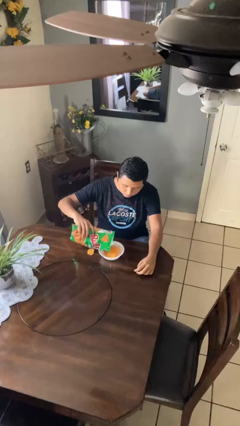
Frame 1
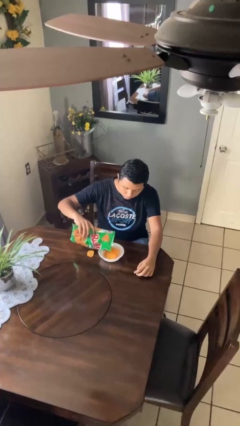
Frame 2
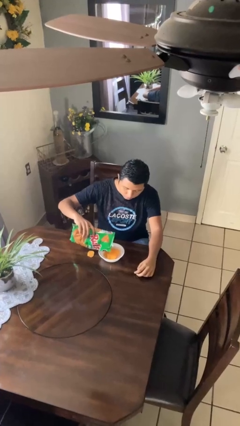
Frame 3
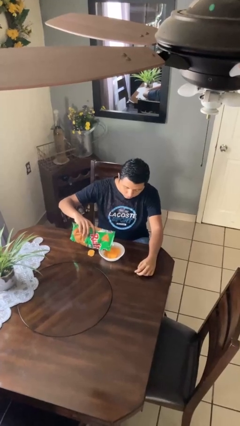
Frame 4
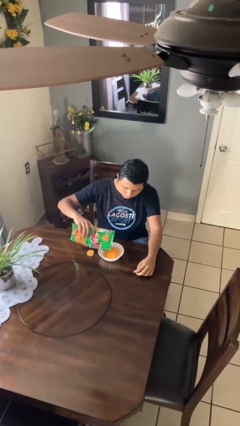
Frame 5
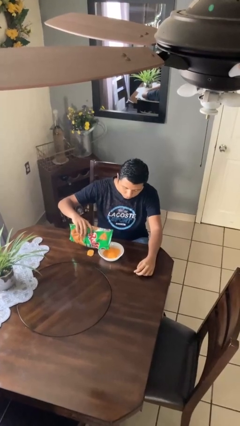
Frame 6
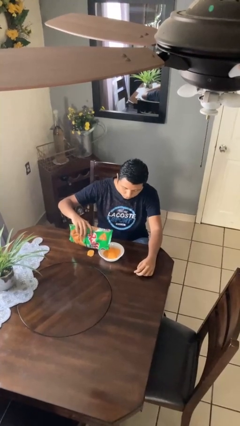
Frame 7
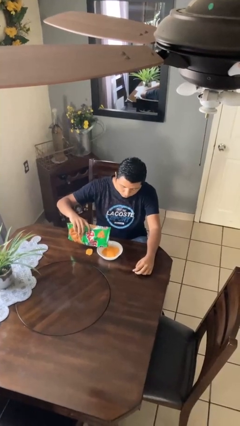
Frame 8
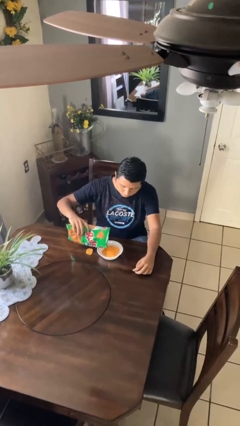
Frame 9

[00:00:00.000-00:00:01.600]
person pours into bowl

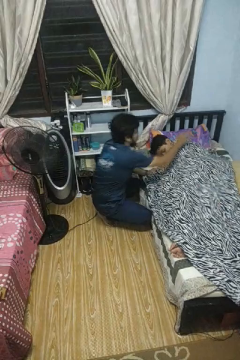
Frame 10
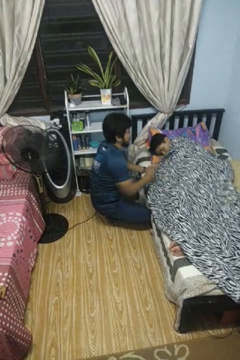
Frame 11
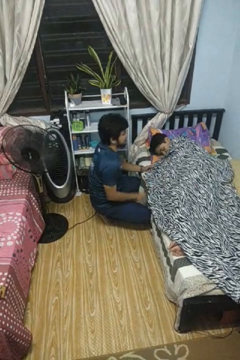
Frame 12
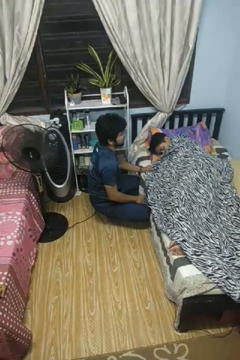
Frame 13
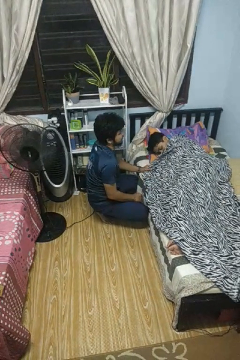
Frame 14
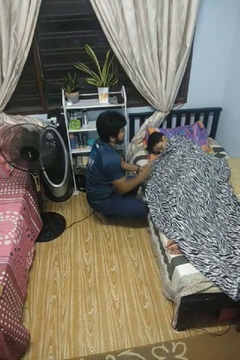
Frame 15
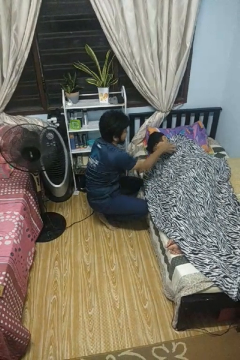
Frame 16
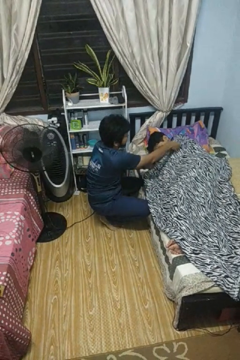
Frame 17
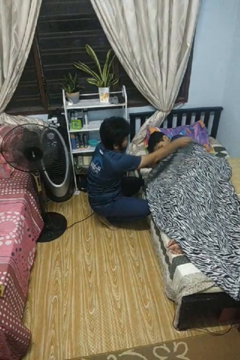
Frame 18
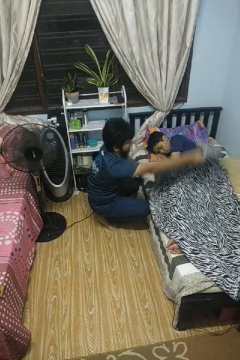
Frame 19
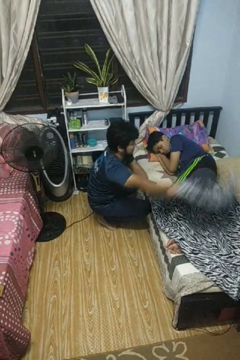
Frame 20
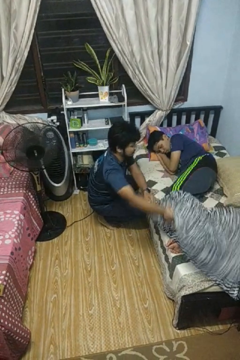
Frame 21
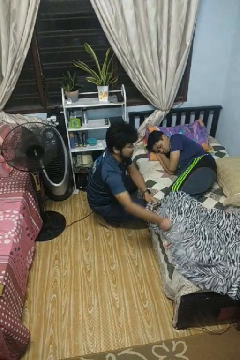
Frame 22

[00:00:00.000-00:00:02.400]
person uncovers friend with blanket

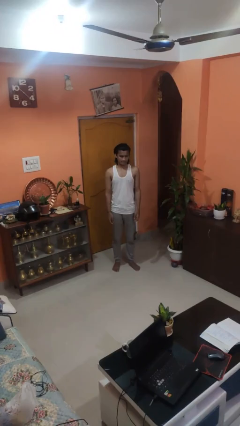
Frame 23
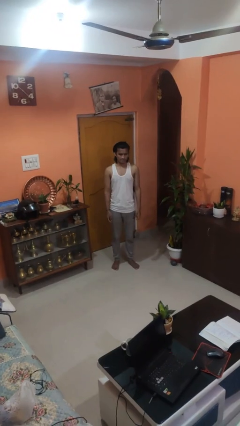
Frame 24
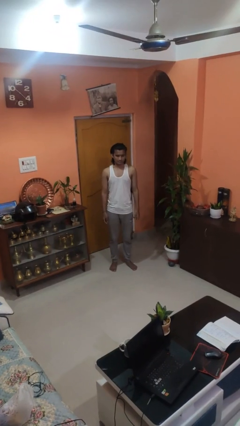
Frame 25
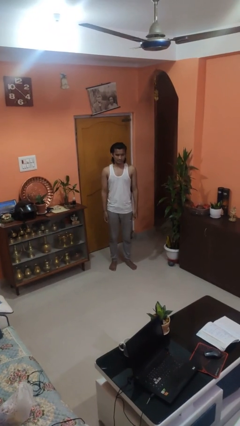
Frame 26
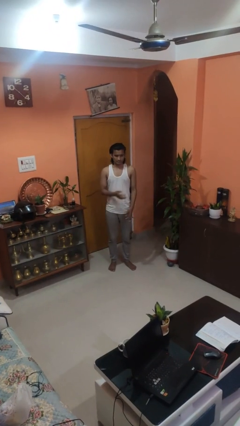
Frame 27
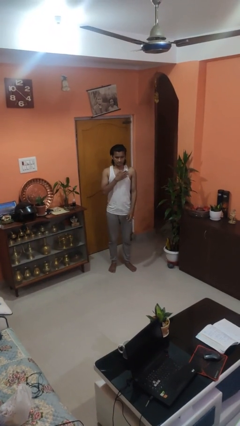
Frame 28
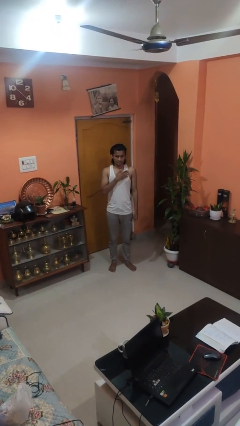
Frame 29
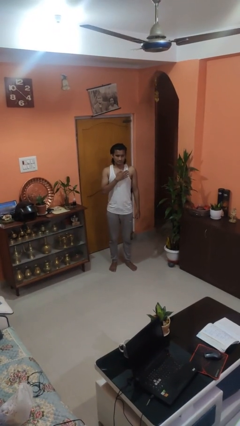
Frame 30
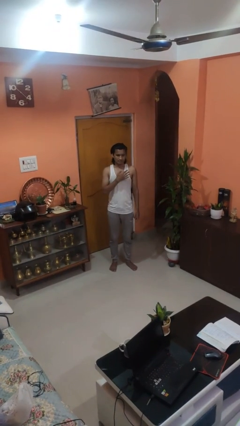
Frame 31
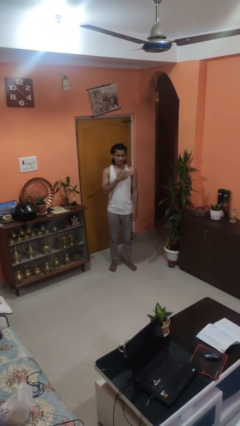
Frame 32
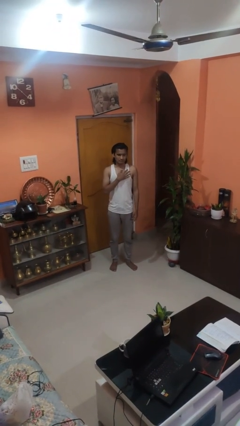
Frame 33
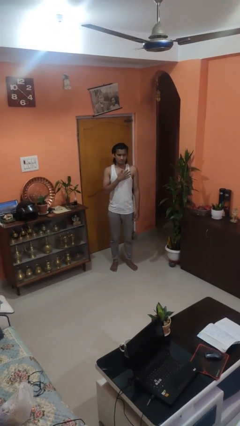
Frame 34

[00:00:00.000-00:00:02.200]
person drums on chest

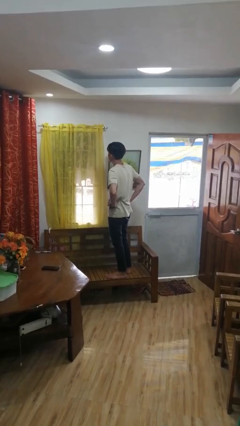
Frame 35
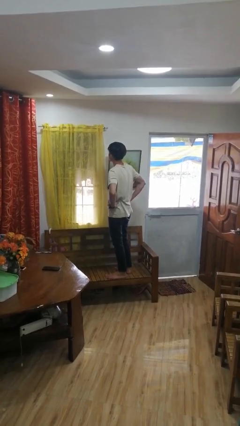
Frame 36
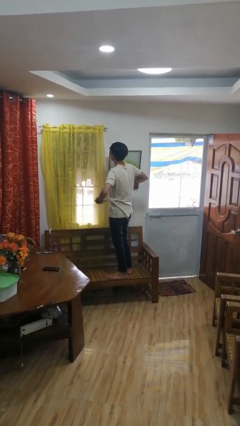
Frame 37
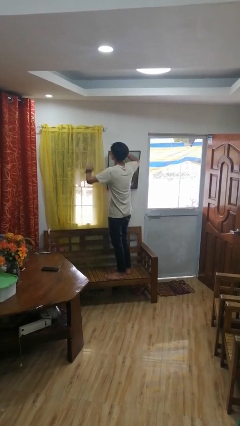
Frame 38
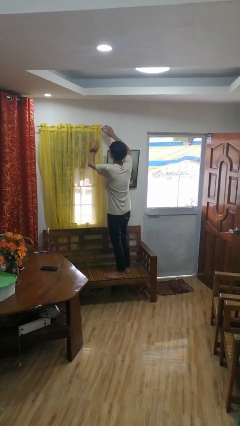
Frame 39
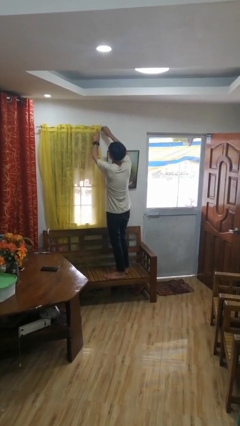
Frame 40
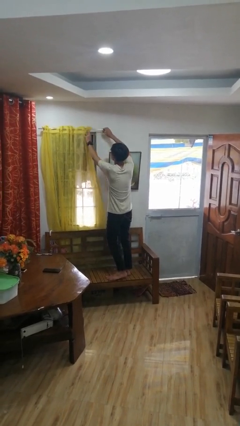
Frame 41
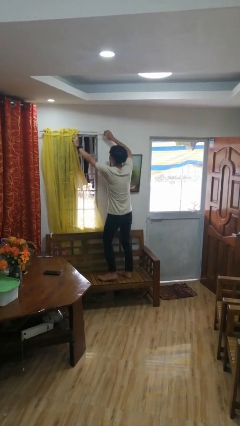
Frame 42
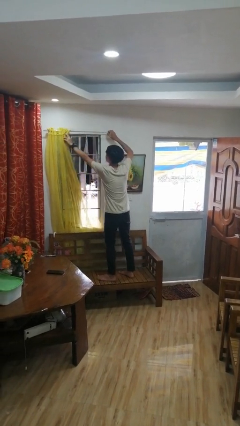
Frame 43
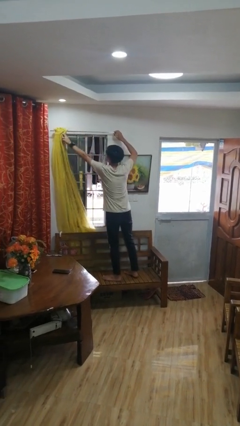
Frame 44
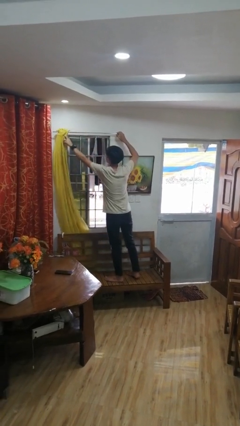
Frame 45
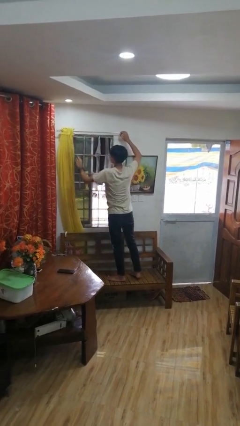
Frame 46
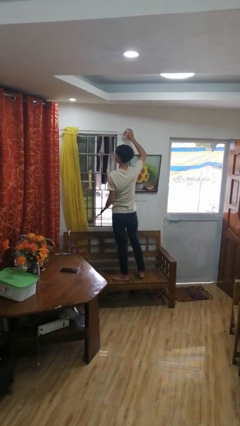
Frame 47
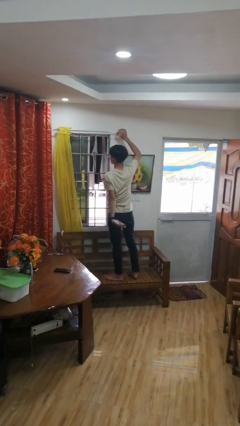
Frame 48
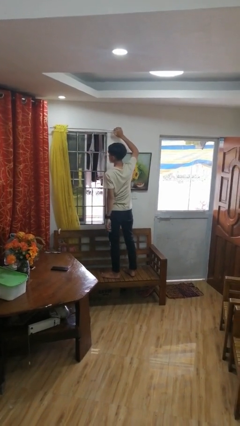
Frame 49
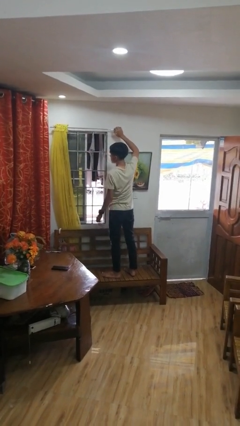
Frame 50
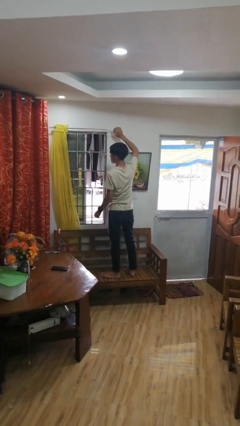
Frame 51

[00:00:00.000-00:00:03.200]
person opens curtains

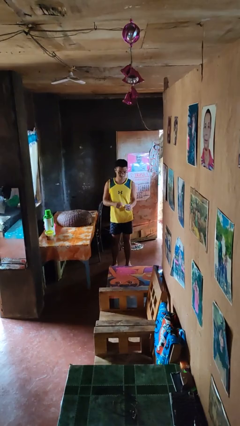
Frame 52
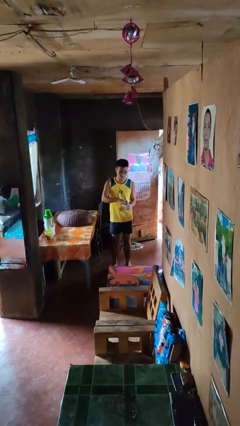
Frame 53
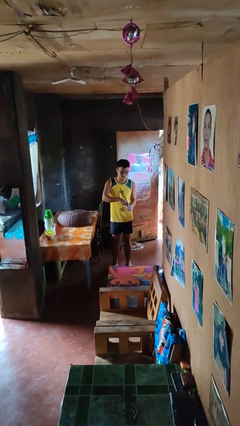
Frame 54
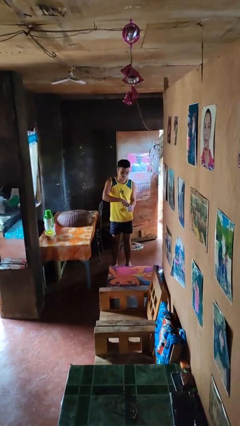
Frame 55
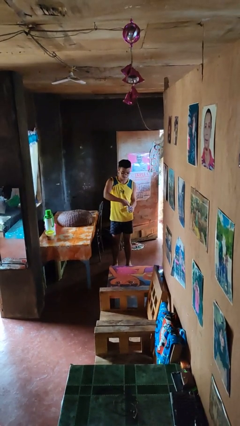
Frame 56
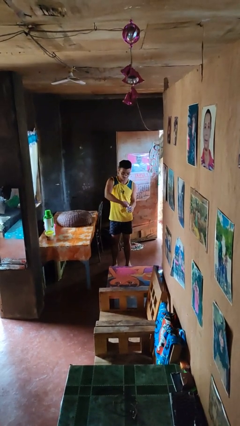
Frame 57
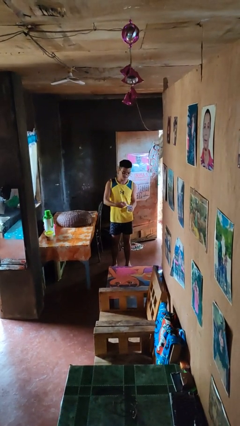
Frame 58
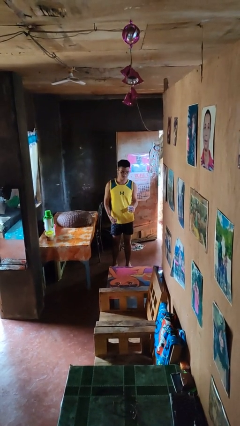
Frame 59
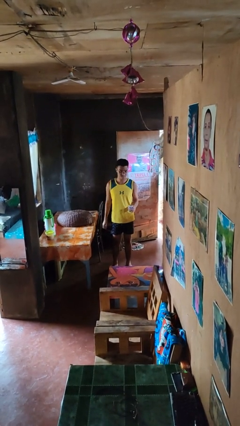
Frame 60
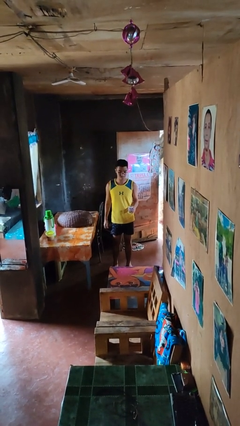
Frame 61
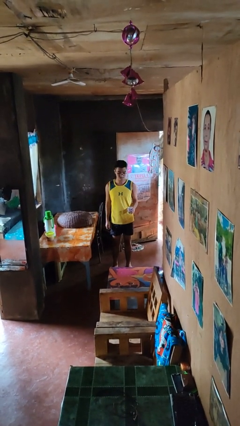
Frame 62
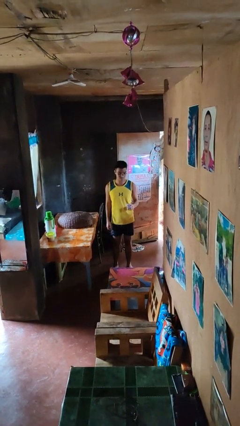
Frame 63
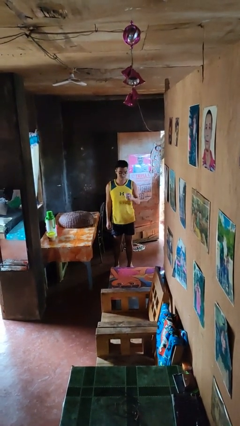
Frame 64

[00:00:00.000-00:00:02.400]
person opens beverage can

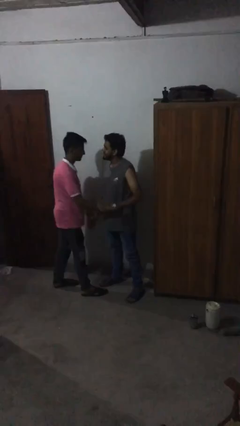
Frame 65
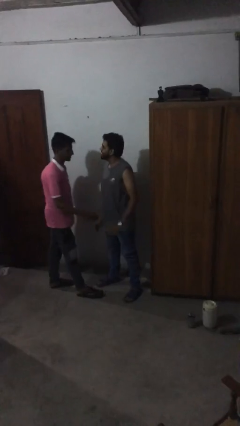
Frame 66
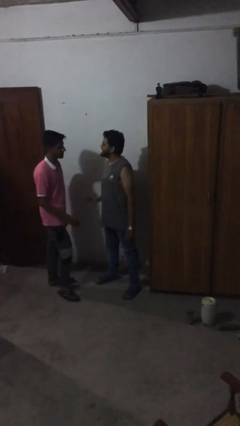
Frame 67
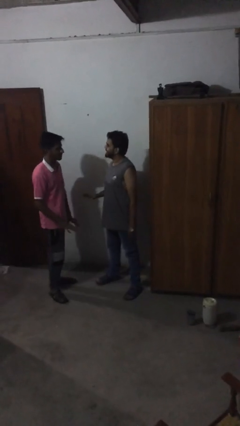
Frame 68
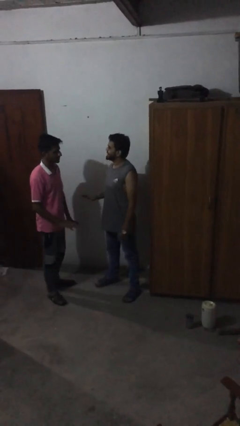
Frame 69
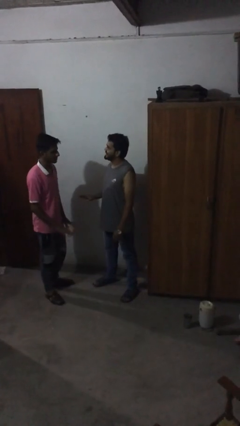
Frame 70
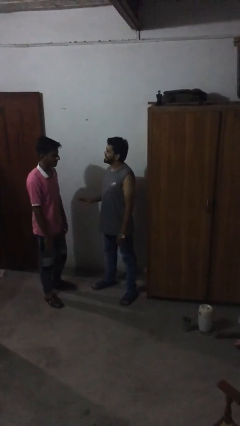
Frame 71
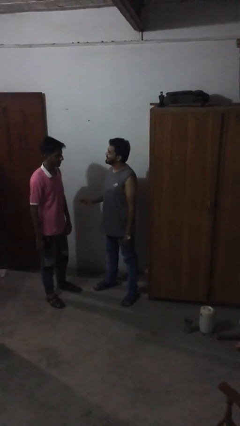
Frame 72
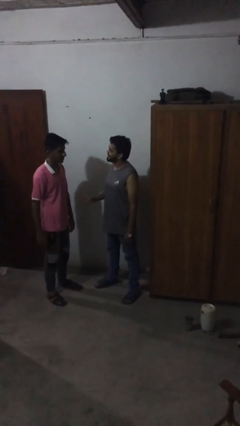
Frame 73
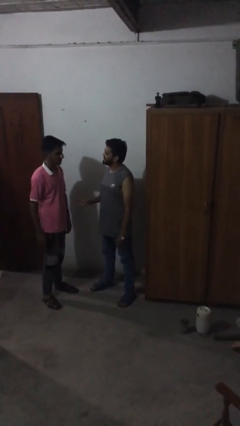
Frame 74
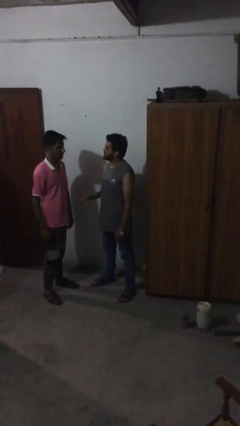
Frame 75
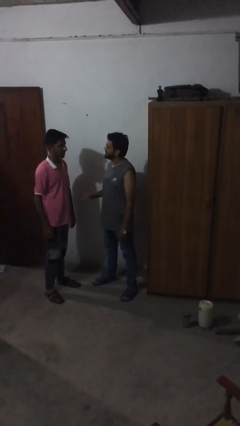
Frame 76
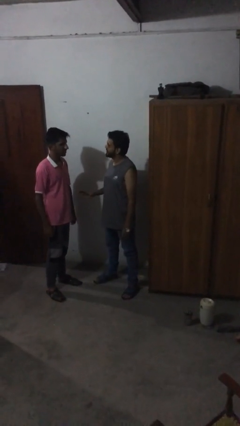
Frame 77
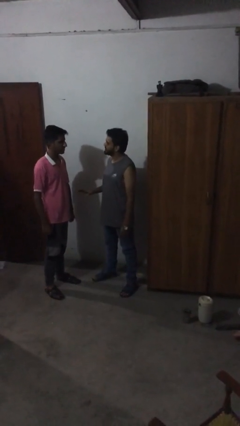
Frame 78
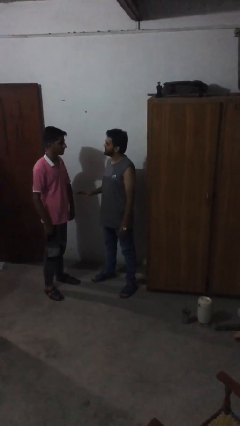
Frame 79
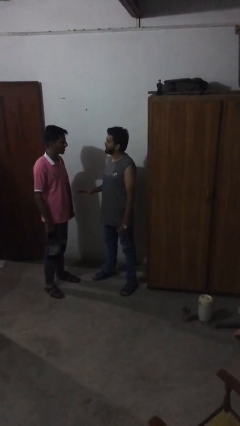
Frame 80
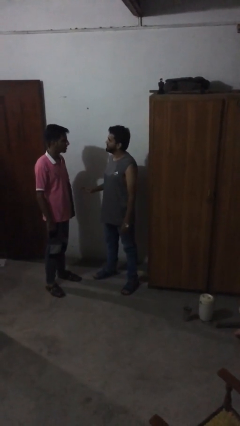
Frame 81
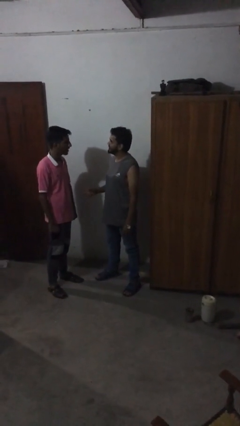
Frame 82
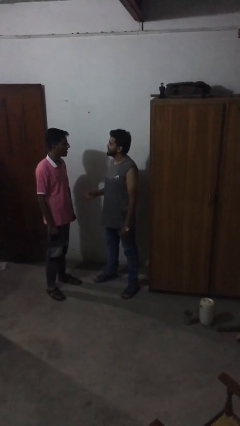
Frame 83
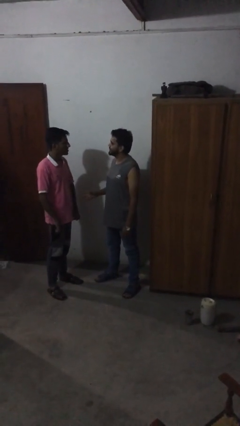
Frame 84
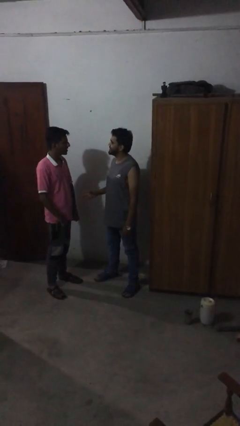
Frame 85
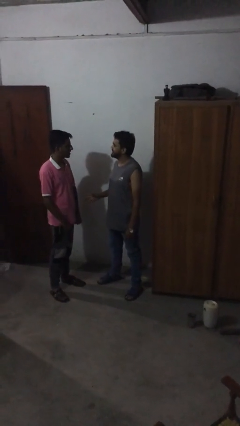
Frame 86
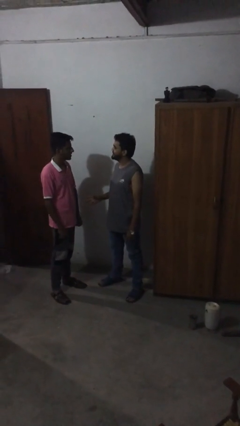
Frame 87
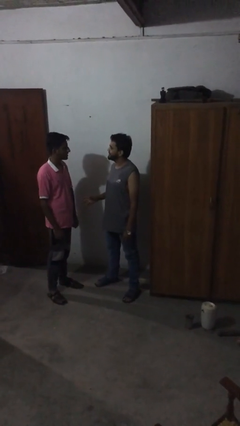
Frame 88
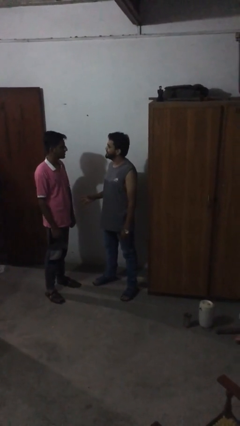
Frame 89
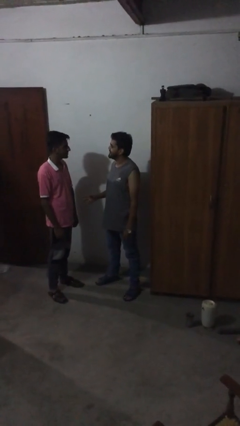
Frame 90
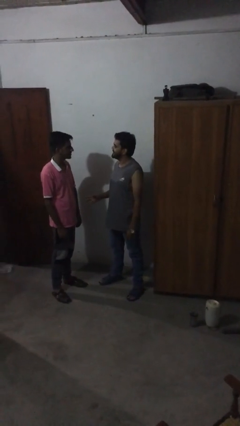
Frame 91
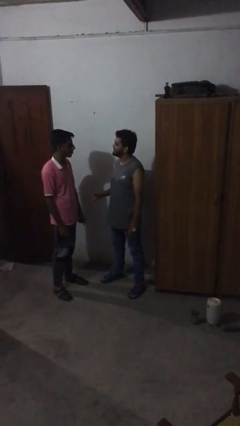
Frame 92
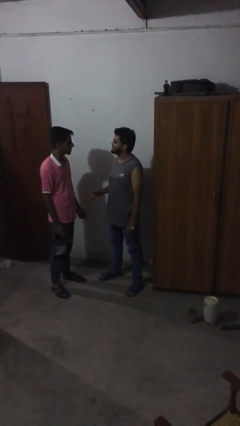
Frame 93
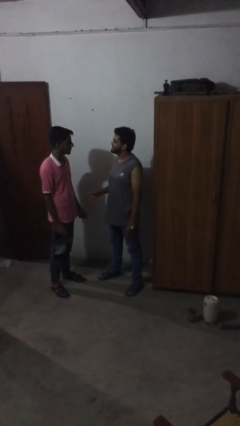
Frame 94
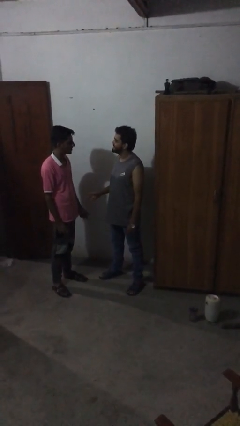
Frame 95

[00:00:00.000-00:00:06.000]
person talks to person
